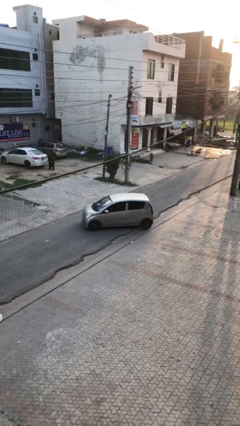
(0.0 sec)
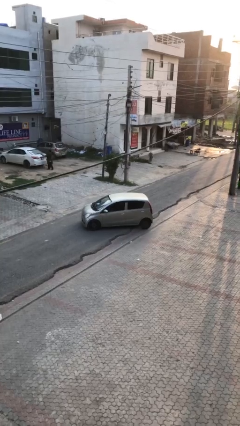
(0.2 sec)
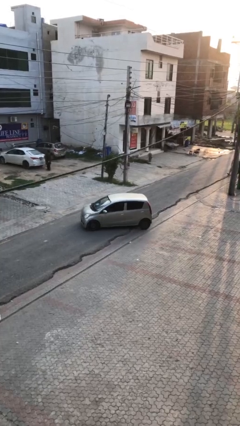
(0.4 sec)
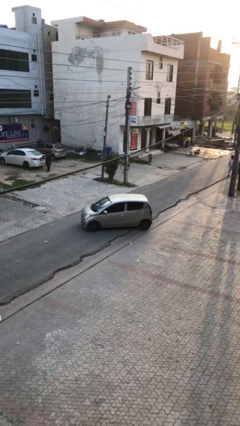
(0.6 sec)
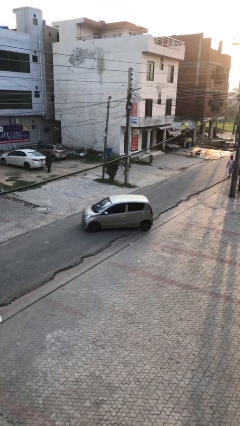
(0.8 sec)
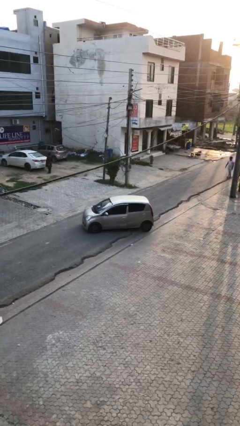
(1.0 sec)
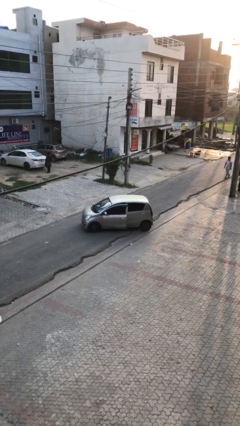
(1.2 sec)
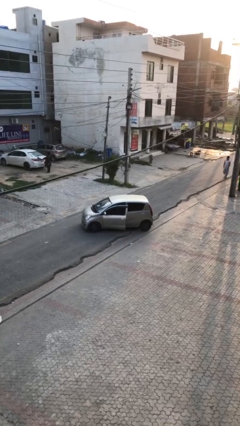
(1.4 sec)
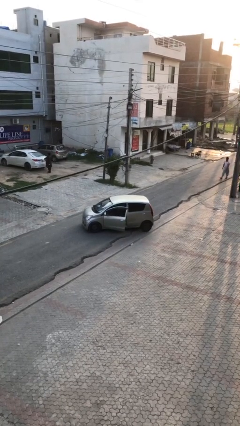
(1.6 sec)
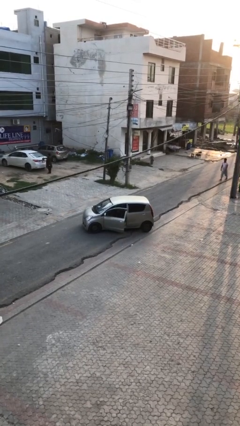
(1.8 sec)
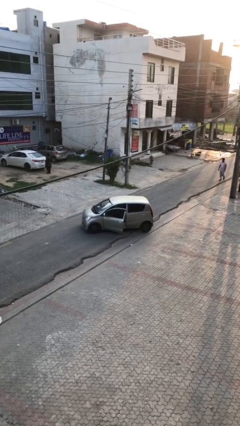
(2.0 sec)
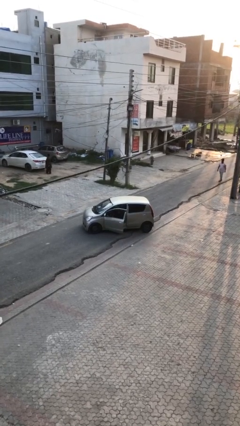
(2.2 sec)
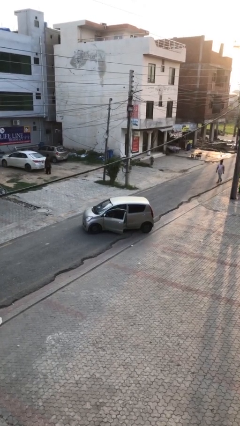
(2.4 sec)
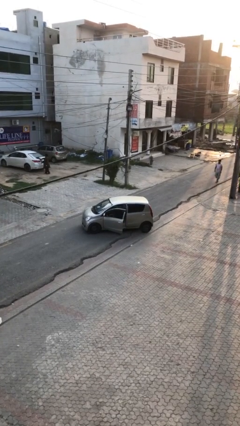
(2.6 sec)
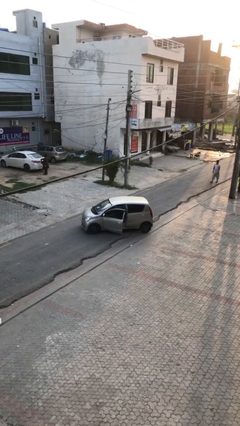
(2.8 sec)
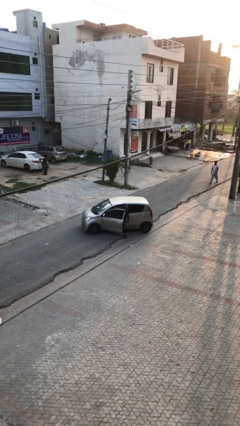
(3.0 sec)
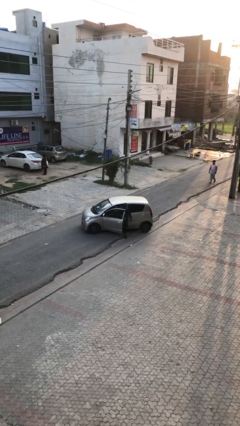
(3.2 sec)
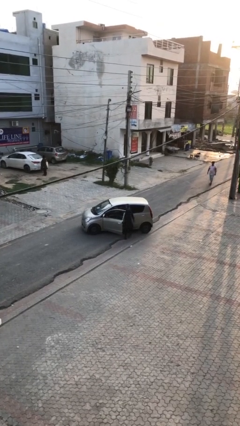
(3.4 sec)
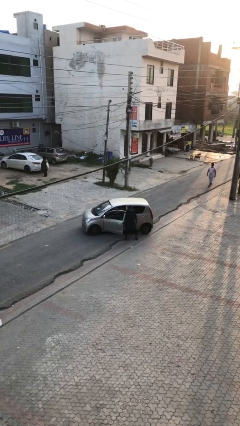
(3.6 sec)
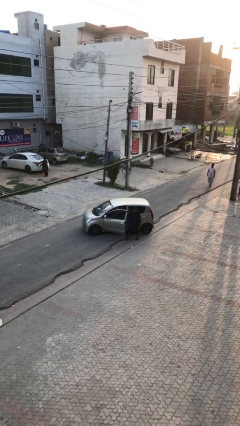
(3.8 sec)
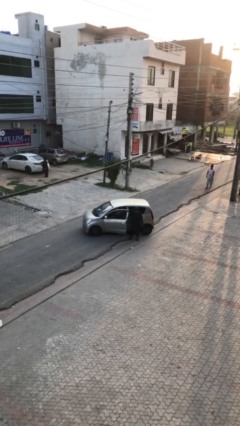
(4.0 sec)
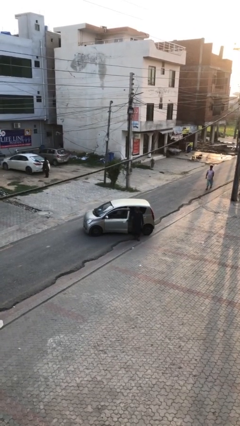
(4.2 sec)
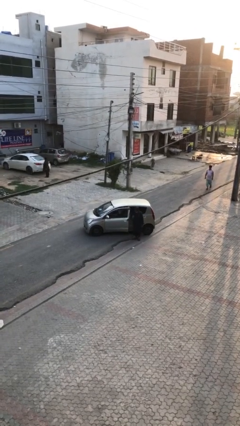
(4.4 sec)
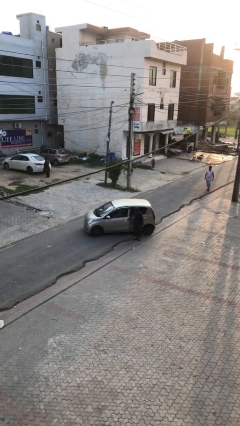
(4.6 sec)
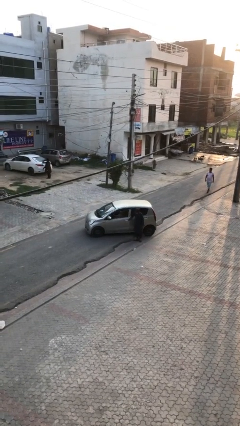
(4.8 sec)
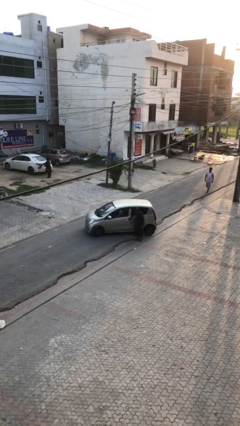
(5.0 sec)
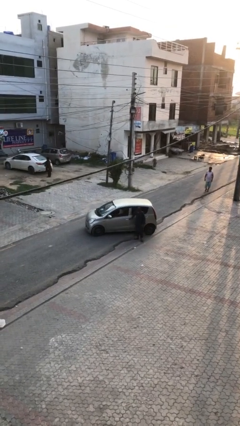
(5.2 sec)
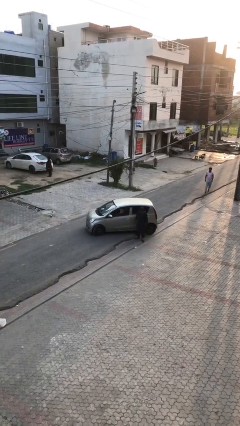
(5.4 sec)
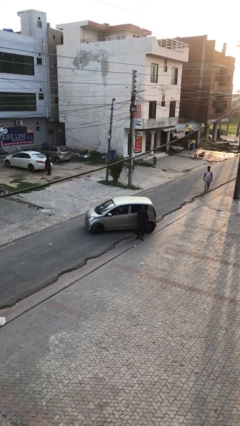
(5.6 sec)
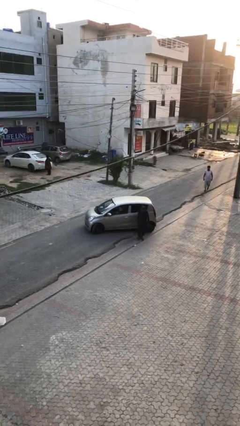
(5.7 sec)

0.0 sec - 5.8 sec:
car drops off person

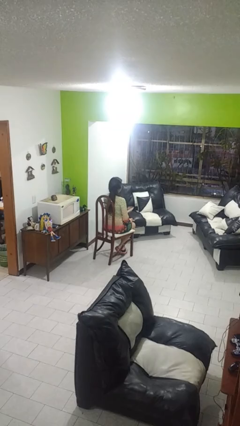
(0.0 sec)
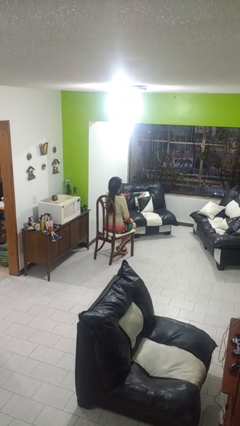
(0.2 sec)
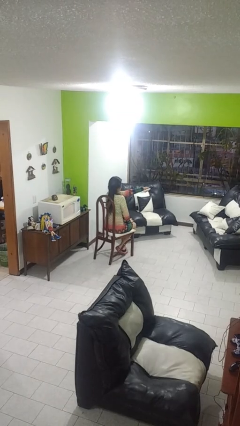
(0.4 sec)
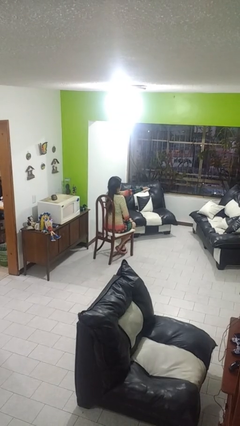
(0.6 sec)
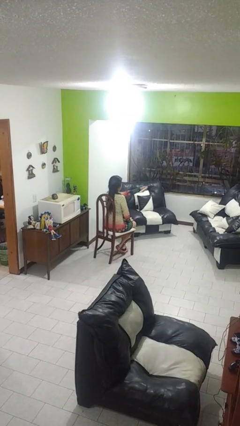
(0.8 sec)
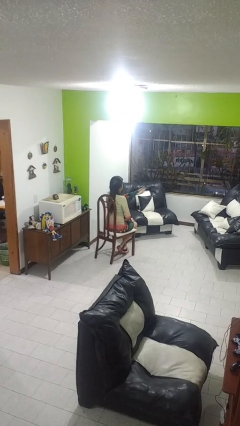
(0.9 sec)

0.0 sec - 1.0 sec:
person uses television remote

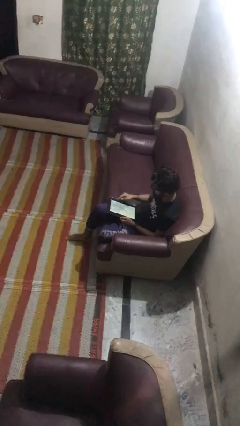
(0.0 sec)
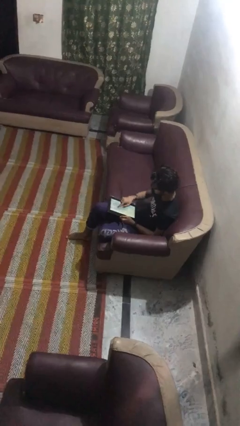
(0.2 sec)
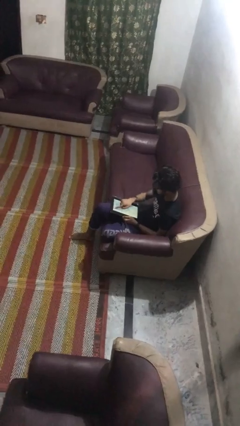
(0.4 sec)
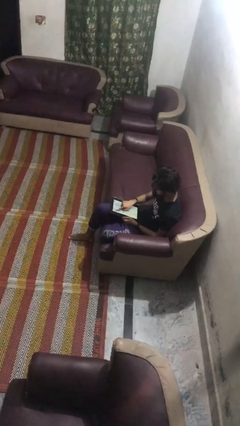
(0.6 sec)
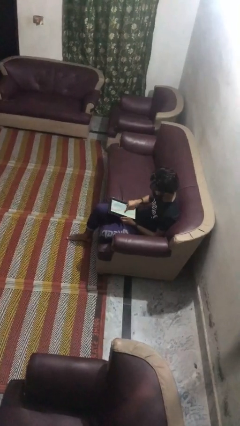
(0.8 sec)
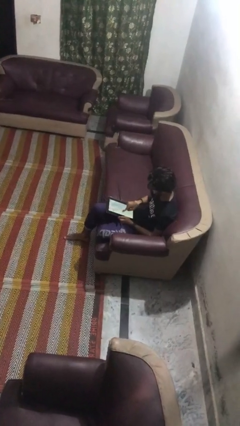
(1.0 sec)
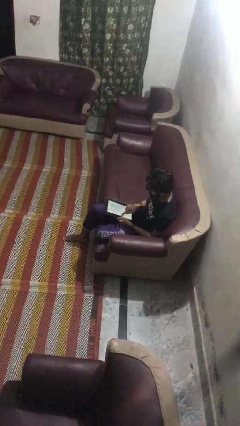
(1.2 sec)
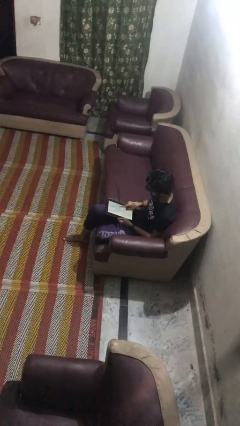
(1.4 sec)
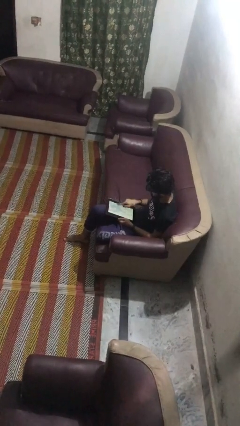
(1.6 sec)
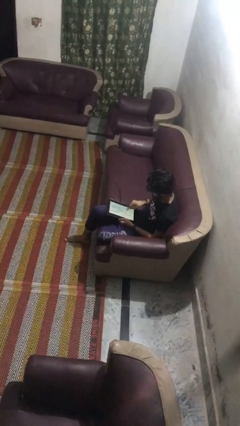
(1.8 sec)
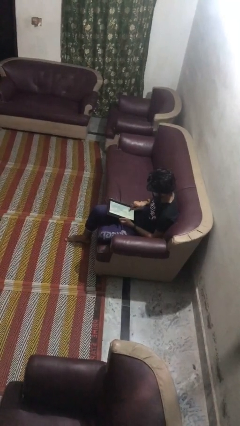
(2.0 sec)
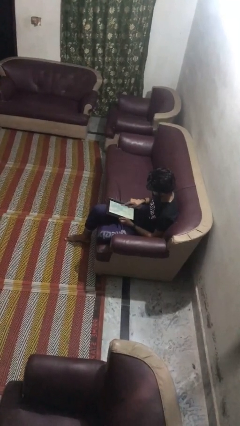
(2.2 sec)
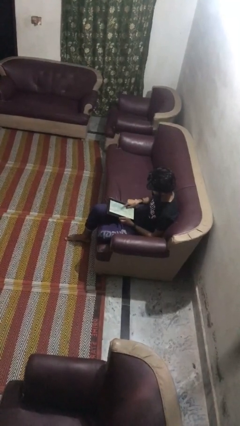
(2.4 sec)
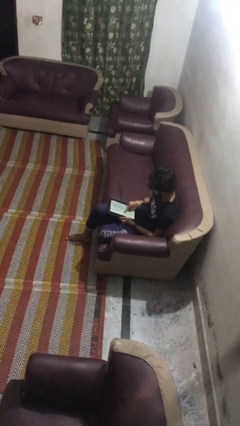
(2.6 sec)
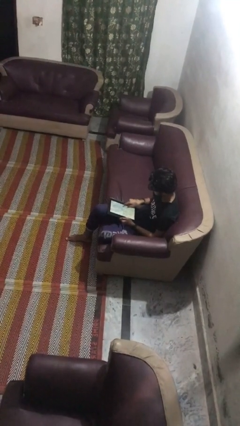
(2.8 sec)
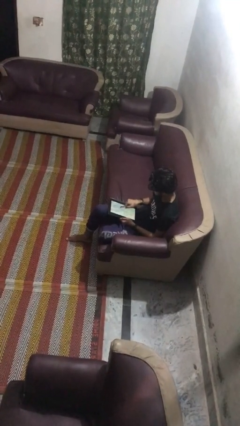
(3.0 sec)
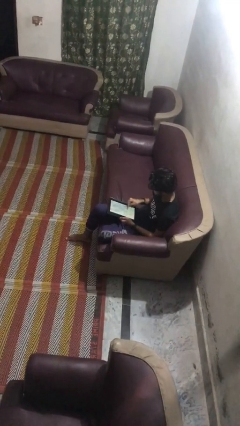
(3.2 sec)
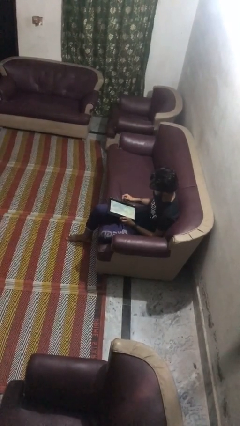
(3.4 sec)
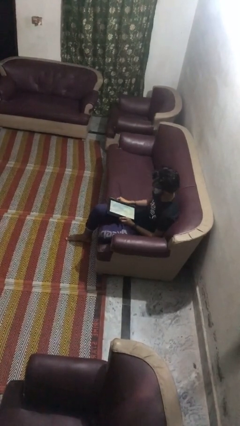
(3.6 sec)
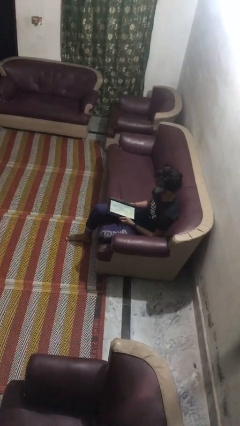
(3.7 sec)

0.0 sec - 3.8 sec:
person interacts with tablet

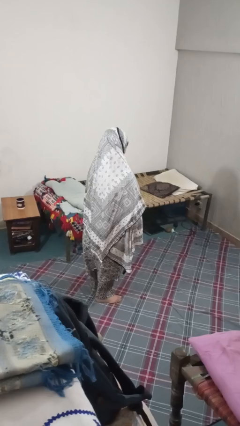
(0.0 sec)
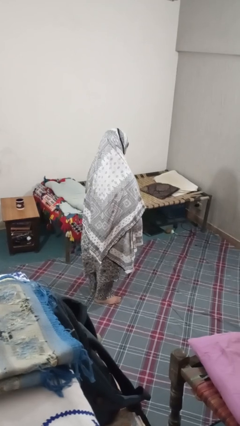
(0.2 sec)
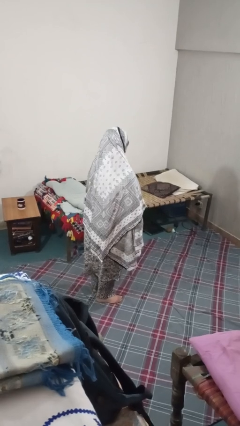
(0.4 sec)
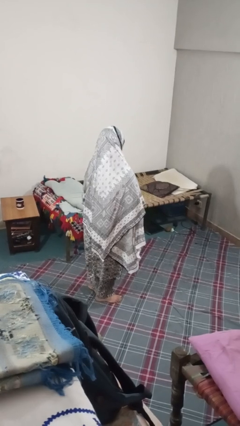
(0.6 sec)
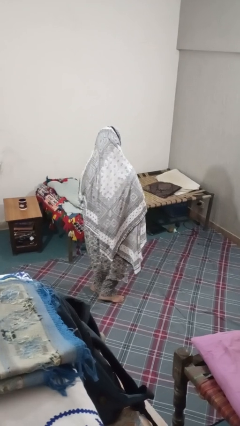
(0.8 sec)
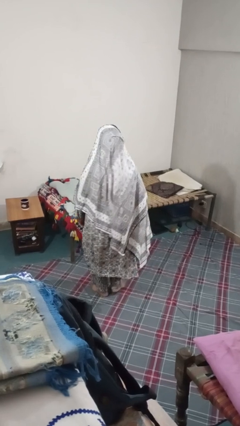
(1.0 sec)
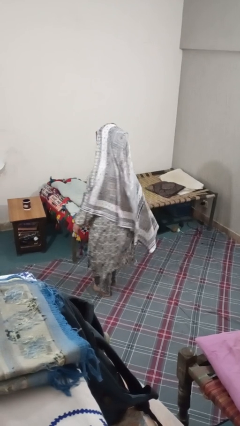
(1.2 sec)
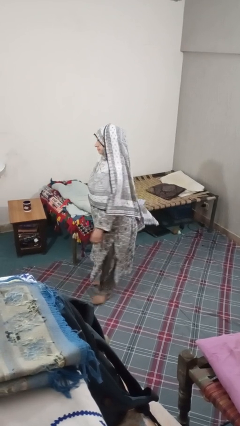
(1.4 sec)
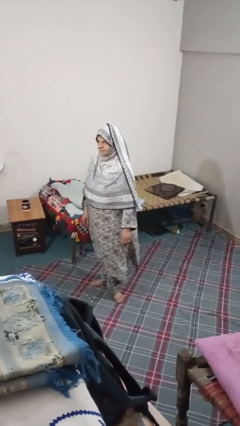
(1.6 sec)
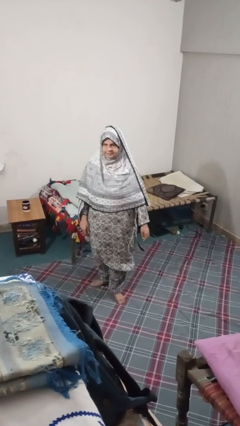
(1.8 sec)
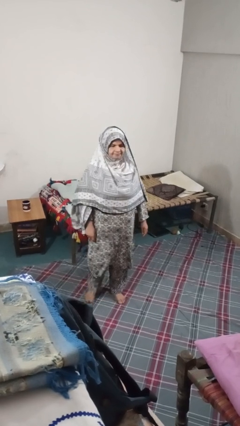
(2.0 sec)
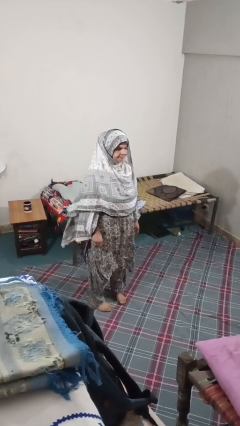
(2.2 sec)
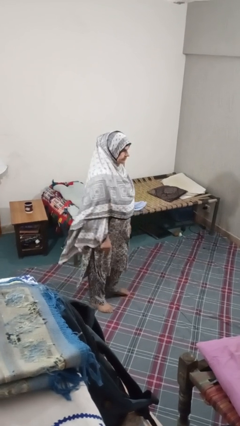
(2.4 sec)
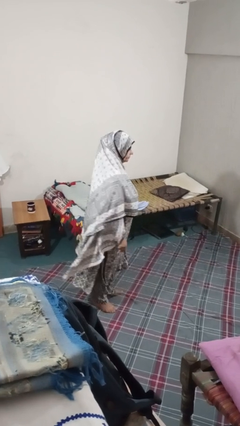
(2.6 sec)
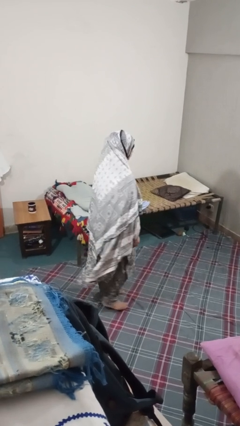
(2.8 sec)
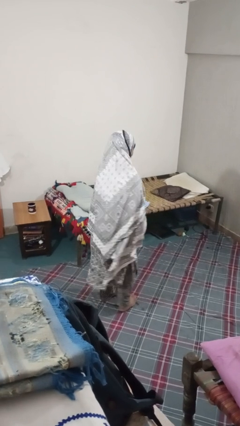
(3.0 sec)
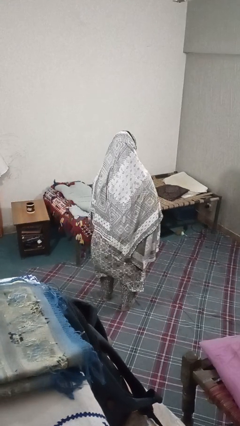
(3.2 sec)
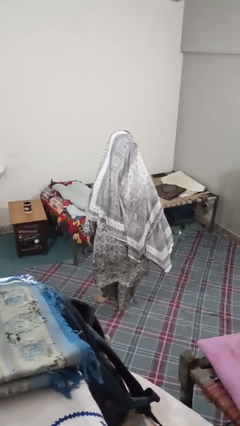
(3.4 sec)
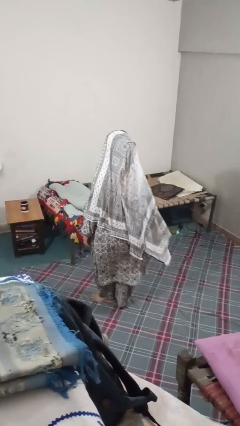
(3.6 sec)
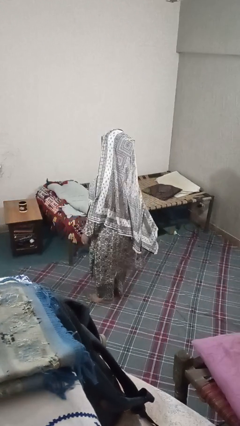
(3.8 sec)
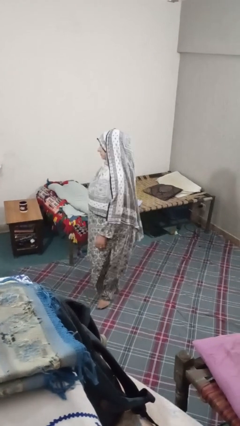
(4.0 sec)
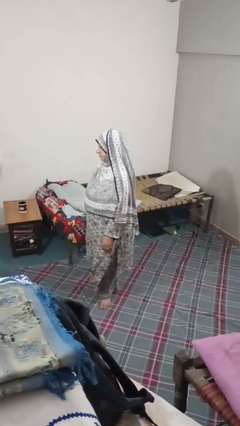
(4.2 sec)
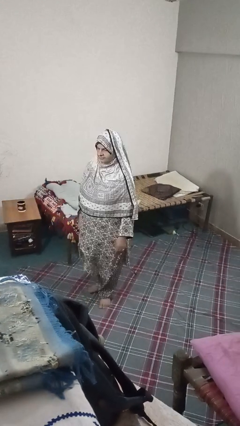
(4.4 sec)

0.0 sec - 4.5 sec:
person twirls

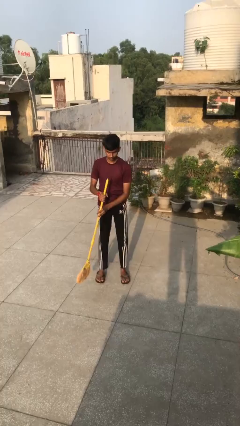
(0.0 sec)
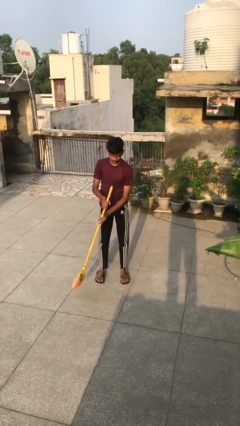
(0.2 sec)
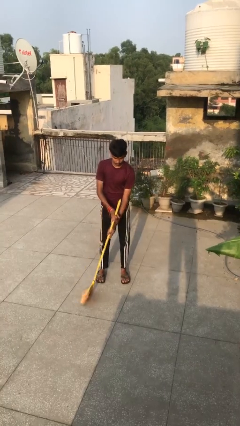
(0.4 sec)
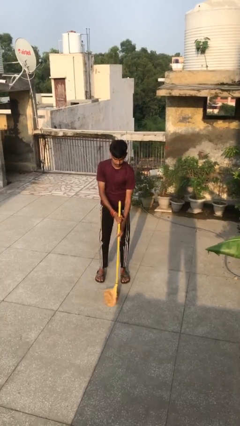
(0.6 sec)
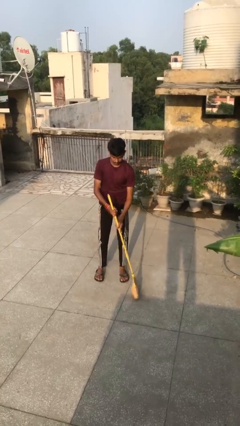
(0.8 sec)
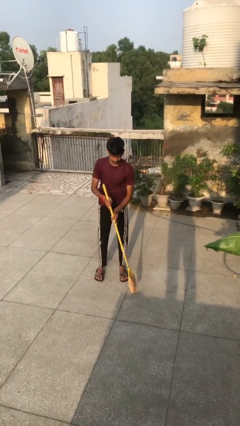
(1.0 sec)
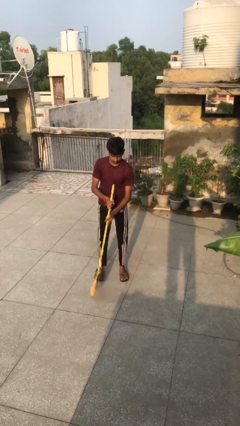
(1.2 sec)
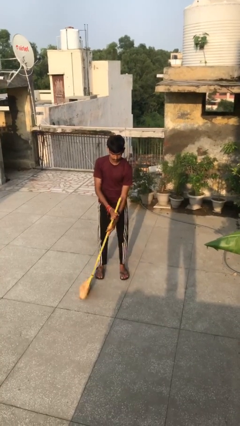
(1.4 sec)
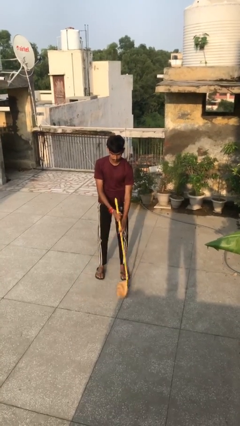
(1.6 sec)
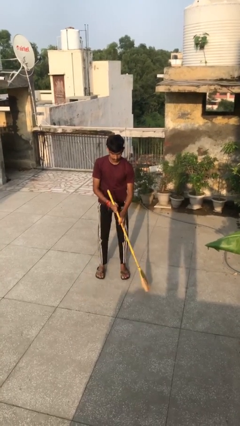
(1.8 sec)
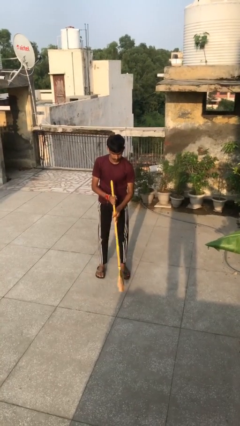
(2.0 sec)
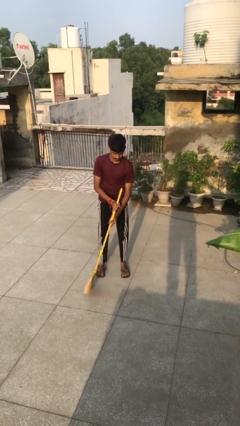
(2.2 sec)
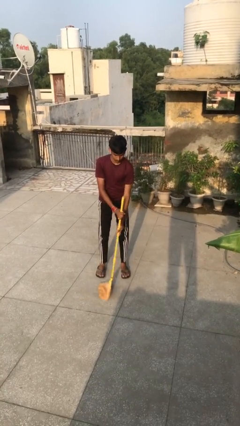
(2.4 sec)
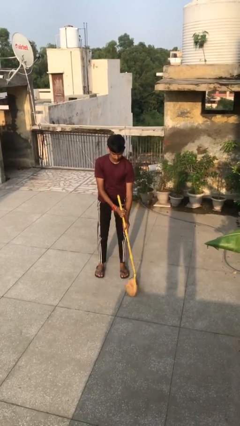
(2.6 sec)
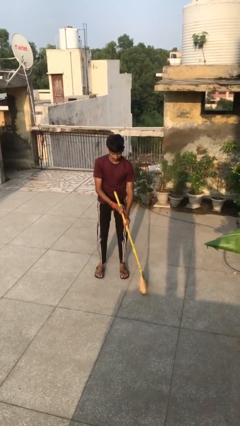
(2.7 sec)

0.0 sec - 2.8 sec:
person sweeps floor
